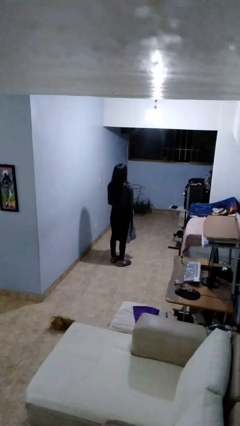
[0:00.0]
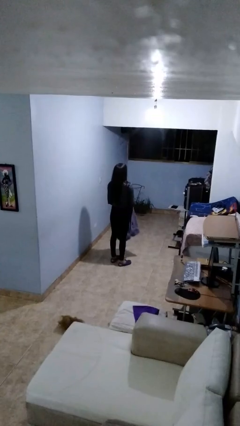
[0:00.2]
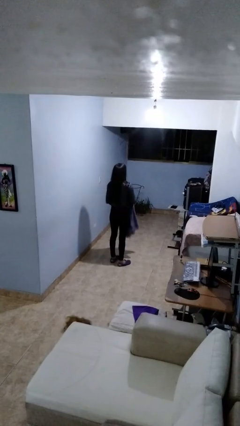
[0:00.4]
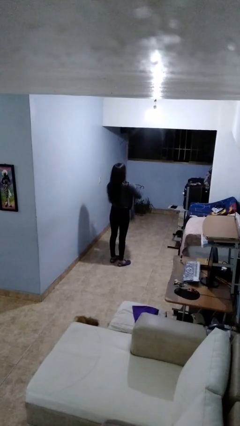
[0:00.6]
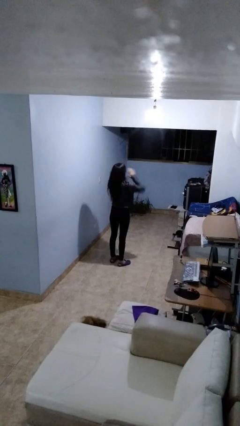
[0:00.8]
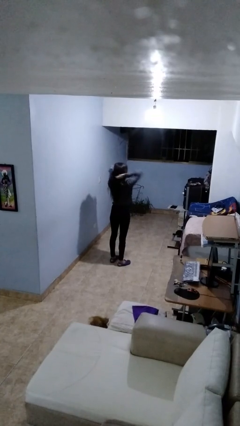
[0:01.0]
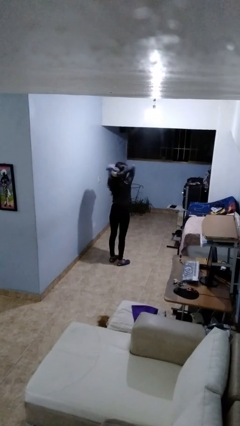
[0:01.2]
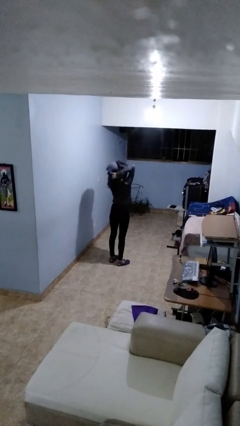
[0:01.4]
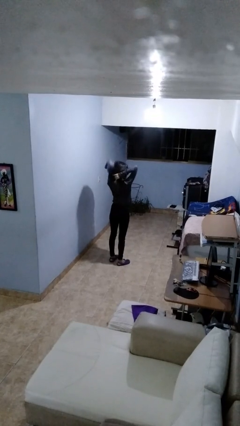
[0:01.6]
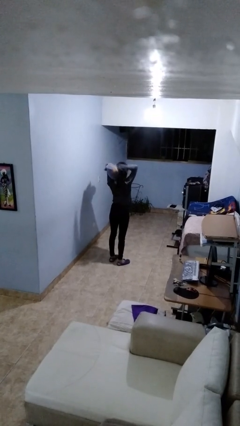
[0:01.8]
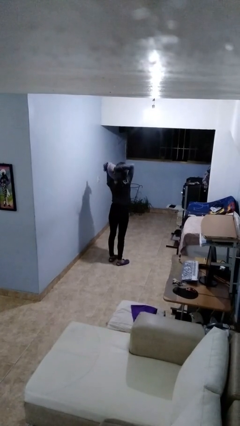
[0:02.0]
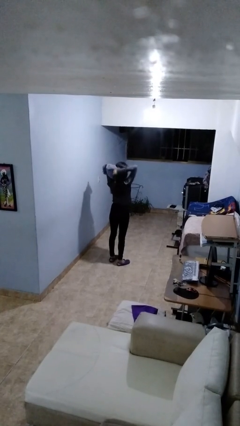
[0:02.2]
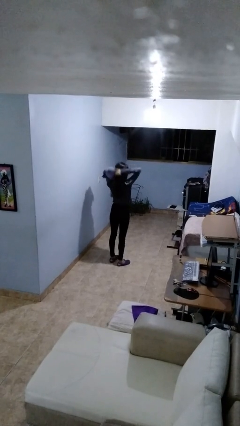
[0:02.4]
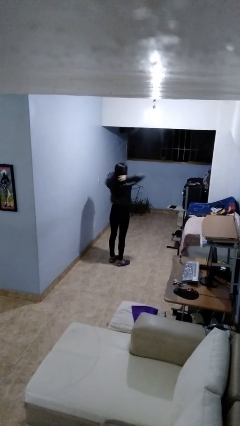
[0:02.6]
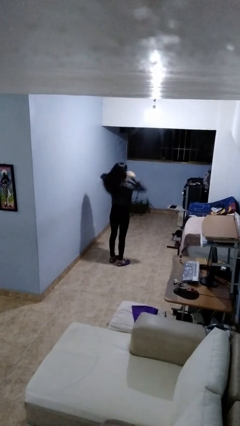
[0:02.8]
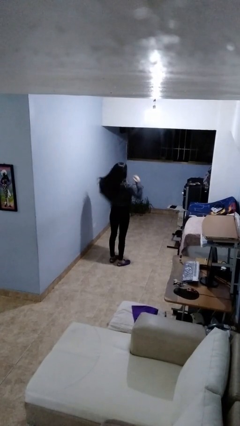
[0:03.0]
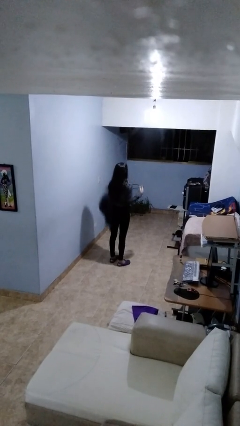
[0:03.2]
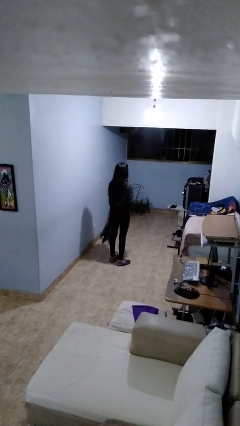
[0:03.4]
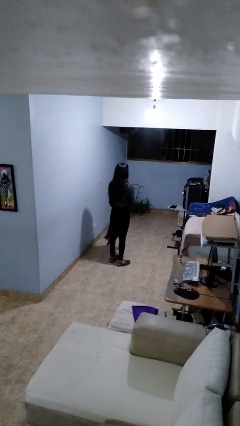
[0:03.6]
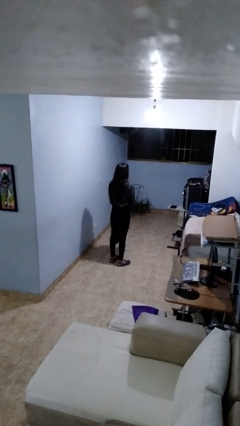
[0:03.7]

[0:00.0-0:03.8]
person dries hair with towel

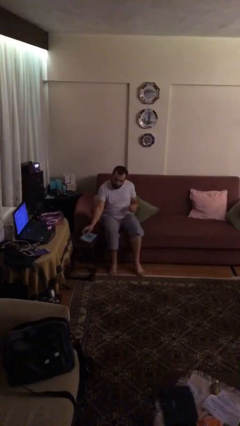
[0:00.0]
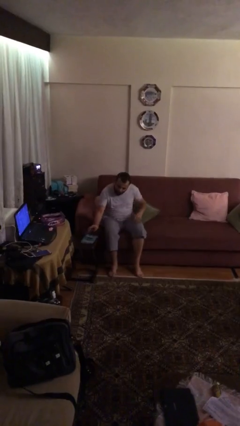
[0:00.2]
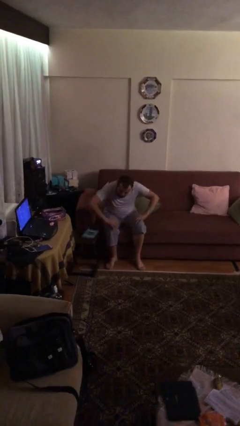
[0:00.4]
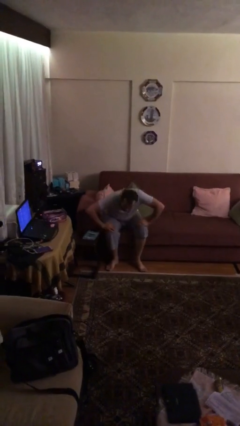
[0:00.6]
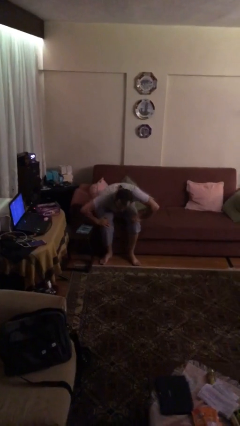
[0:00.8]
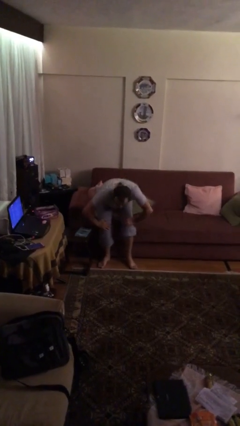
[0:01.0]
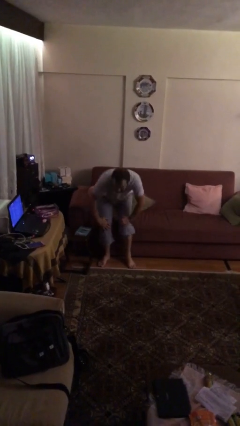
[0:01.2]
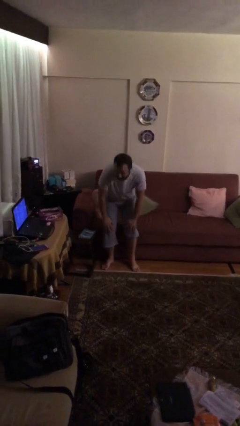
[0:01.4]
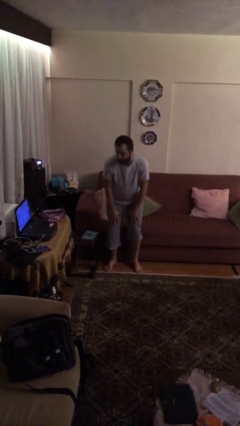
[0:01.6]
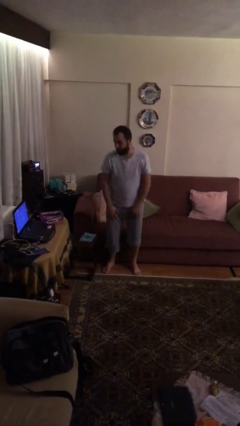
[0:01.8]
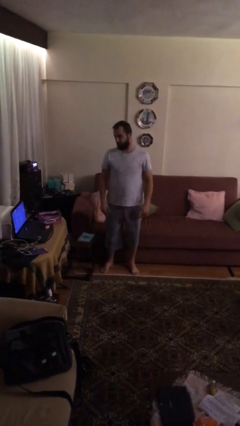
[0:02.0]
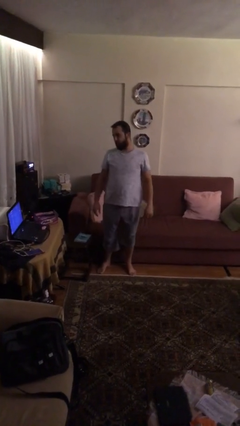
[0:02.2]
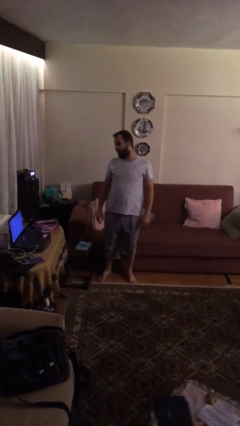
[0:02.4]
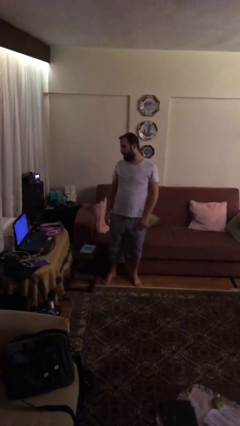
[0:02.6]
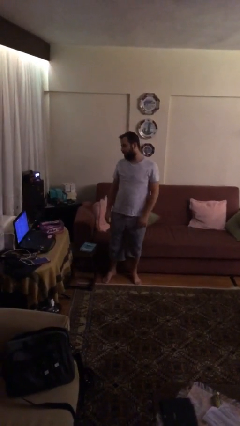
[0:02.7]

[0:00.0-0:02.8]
person stands up

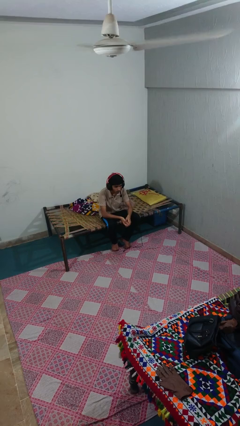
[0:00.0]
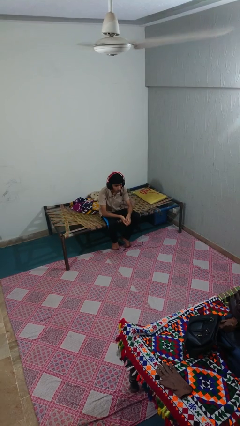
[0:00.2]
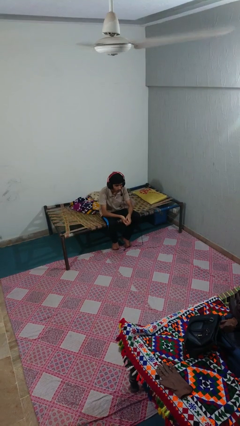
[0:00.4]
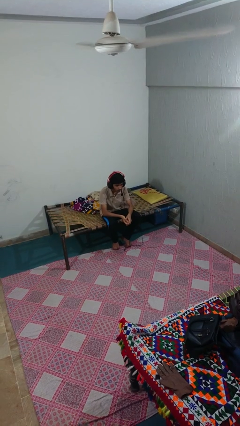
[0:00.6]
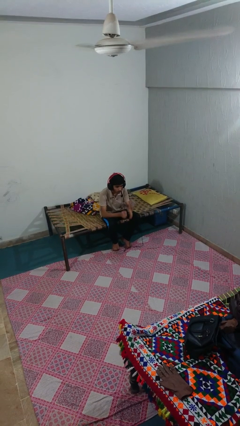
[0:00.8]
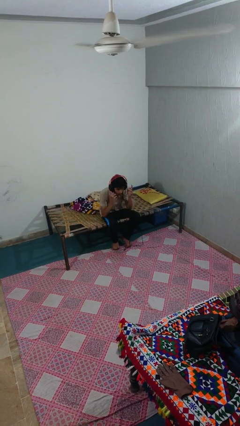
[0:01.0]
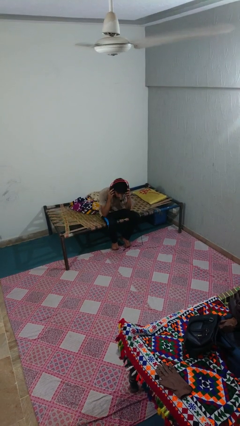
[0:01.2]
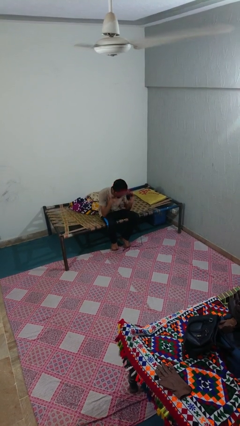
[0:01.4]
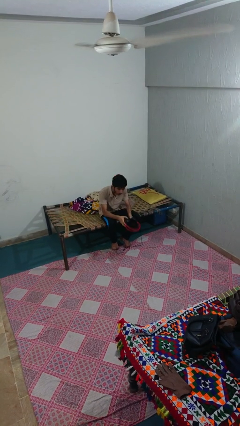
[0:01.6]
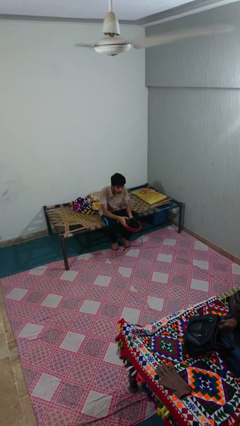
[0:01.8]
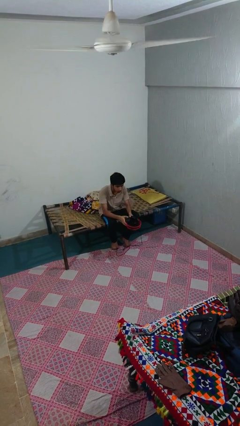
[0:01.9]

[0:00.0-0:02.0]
person takes off headphones

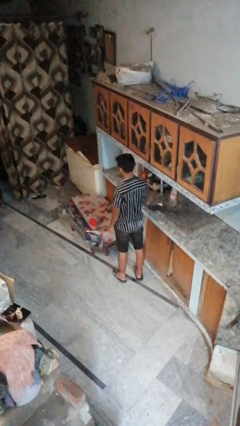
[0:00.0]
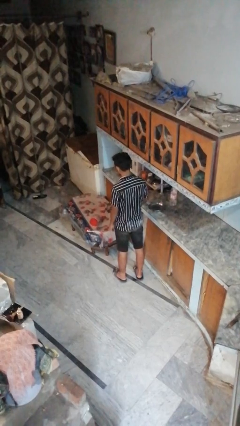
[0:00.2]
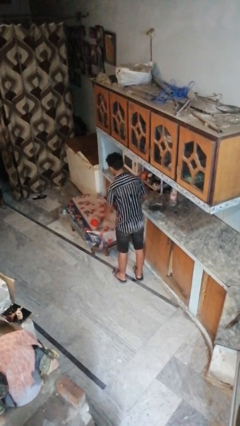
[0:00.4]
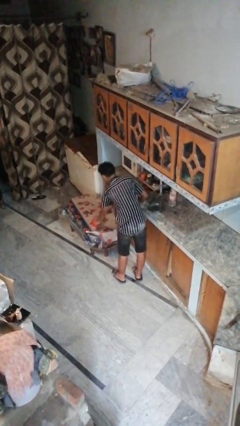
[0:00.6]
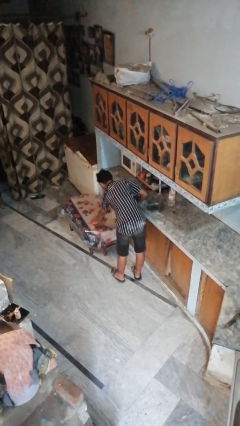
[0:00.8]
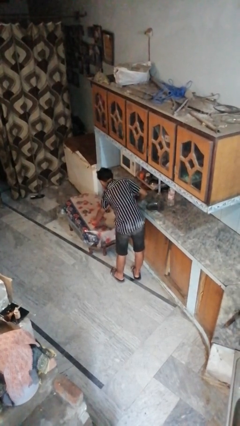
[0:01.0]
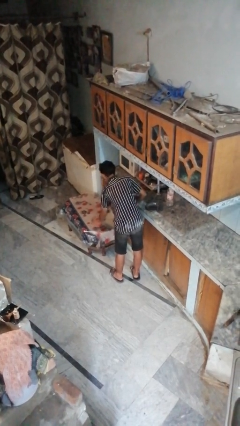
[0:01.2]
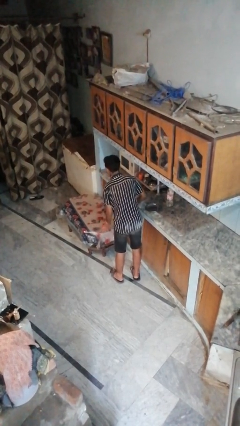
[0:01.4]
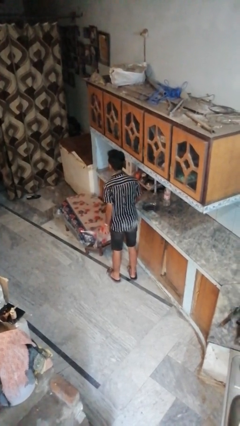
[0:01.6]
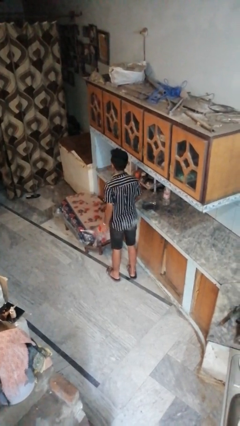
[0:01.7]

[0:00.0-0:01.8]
person picks up object from table

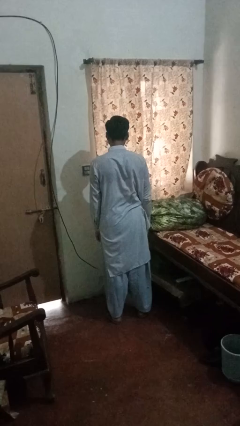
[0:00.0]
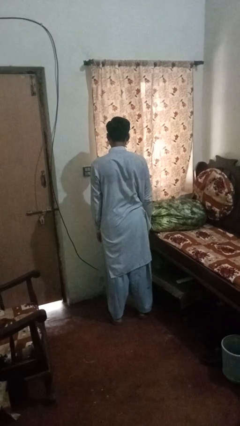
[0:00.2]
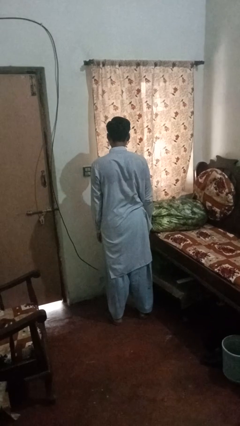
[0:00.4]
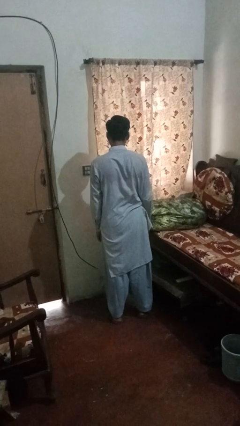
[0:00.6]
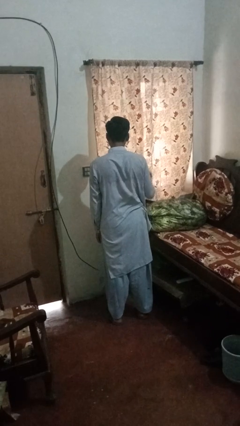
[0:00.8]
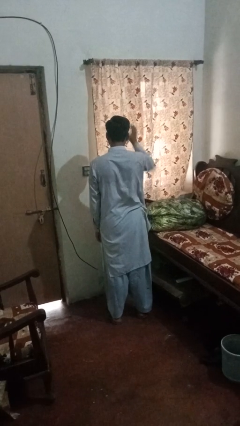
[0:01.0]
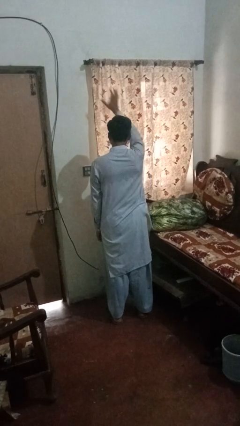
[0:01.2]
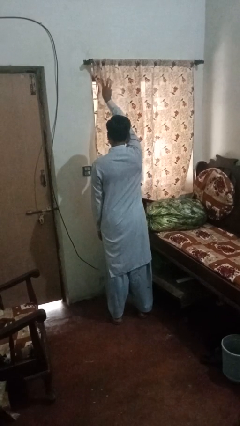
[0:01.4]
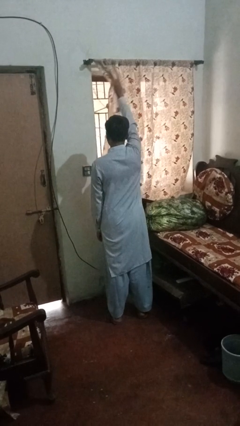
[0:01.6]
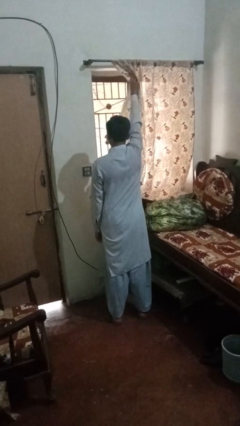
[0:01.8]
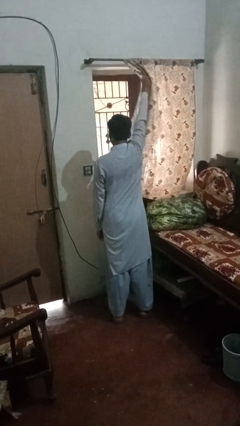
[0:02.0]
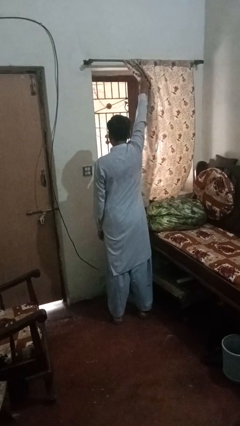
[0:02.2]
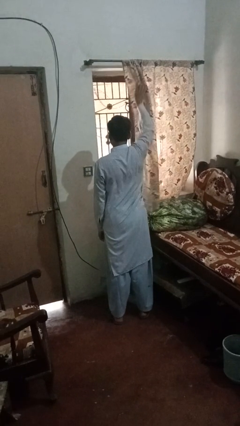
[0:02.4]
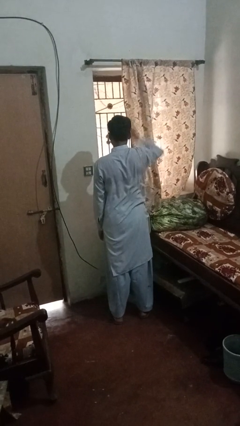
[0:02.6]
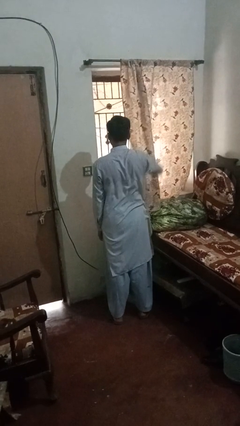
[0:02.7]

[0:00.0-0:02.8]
person opens curtains

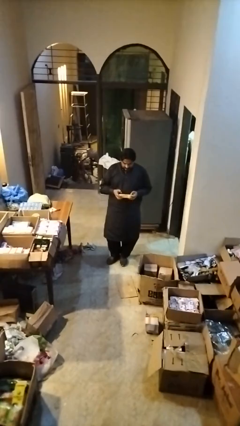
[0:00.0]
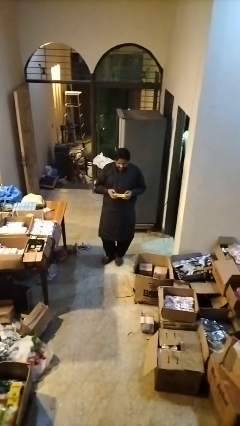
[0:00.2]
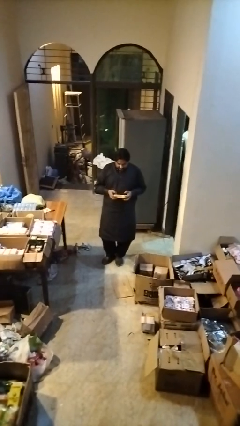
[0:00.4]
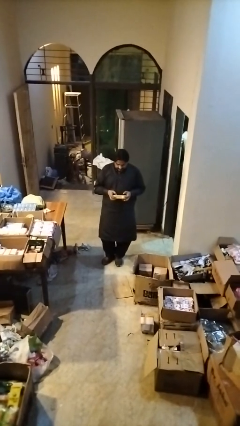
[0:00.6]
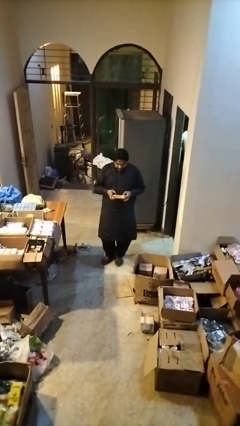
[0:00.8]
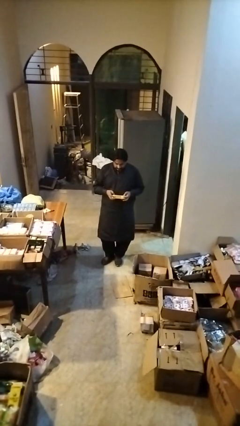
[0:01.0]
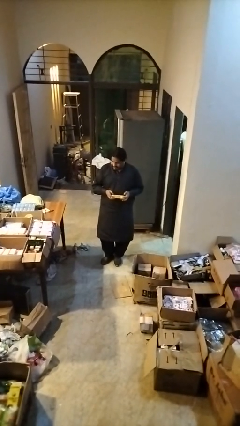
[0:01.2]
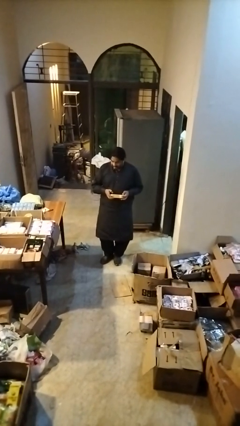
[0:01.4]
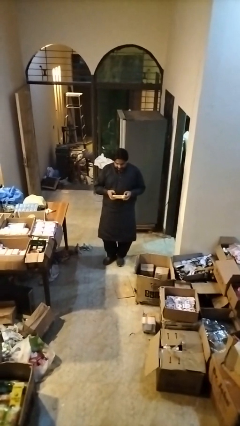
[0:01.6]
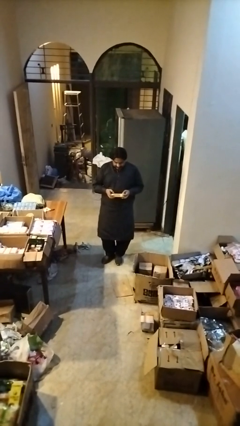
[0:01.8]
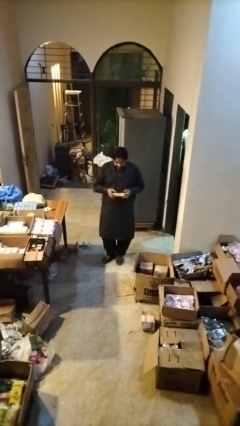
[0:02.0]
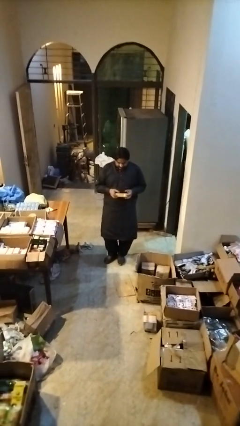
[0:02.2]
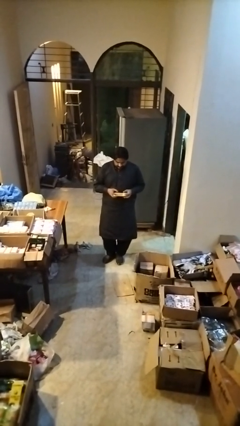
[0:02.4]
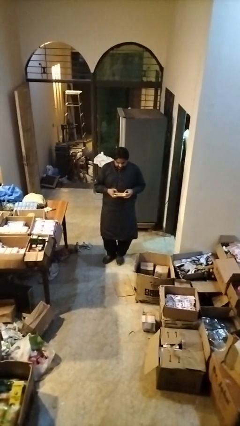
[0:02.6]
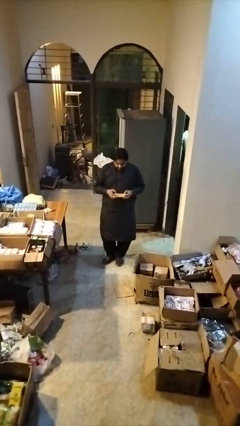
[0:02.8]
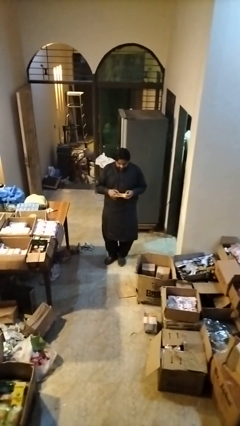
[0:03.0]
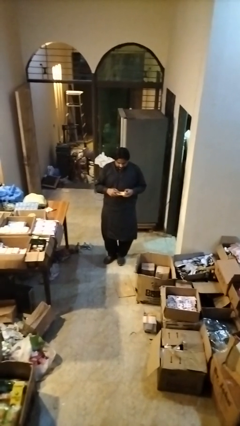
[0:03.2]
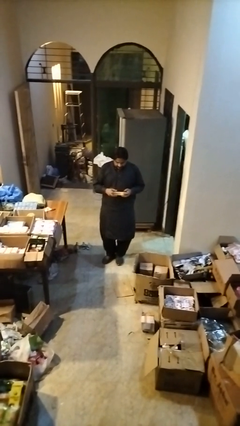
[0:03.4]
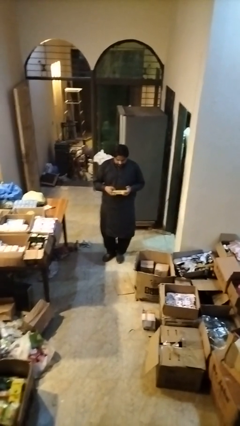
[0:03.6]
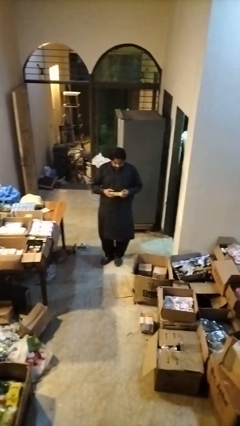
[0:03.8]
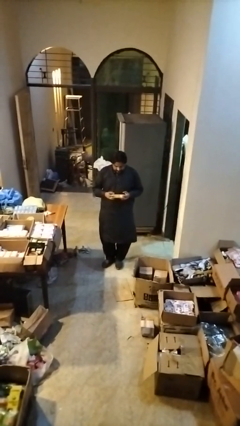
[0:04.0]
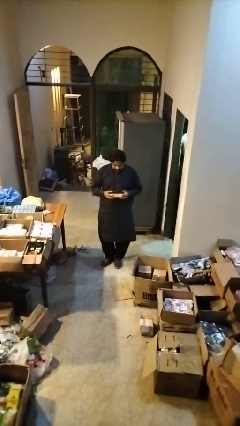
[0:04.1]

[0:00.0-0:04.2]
person interacts with handheld game
